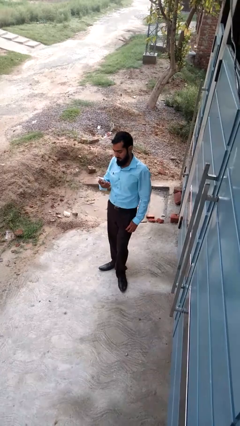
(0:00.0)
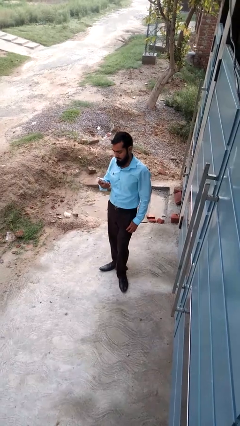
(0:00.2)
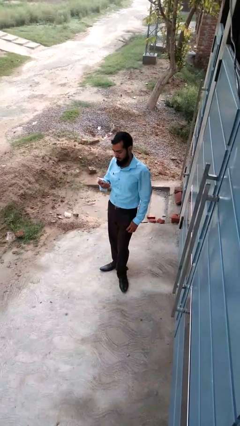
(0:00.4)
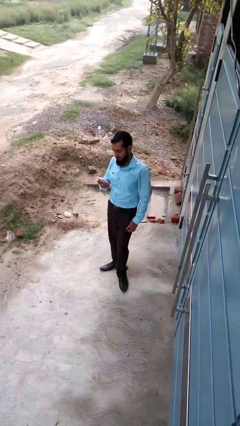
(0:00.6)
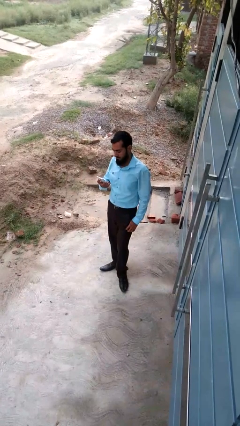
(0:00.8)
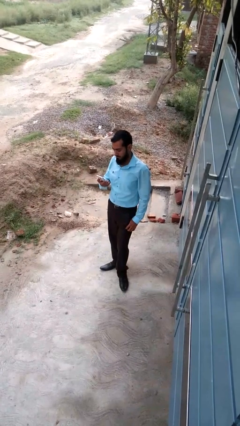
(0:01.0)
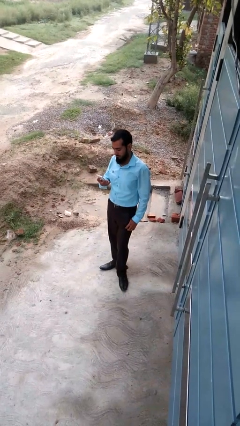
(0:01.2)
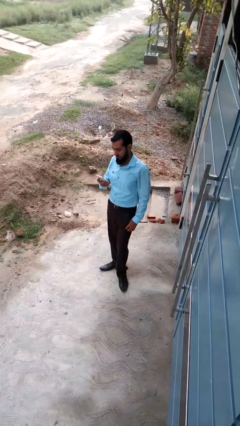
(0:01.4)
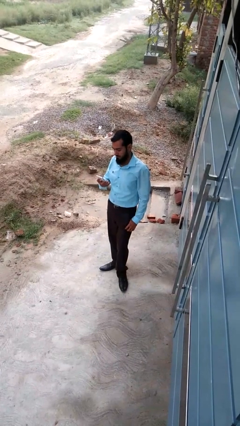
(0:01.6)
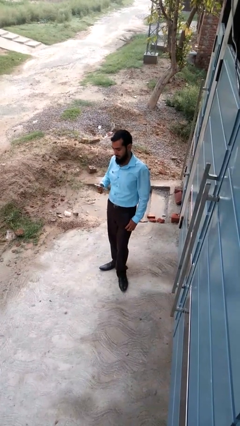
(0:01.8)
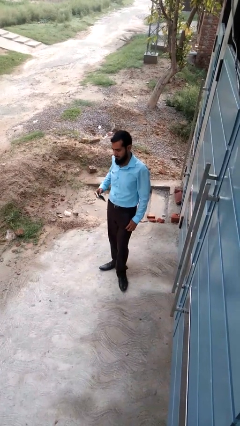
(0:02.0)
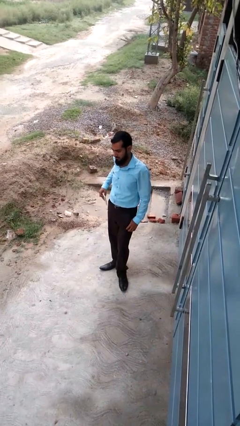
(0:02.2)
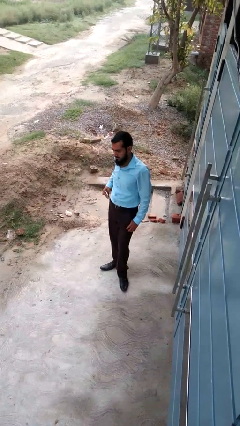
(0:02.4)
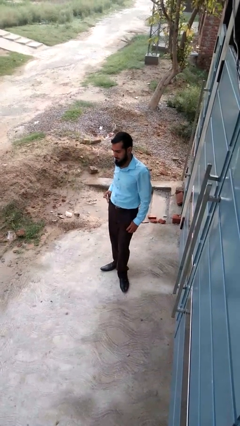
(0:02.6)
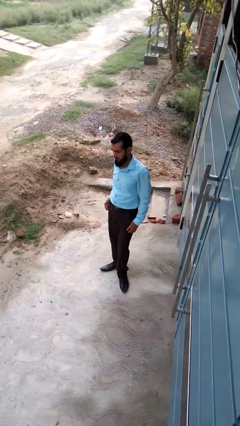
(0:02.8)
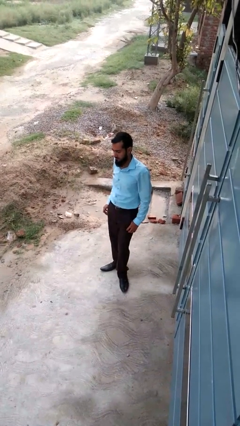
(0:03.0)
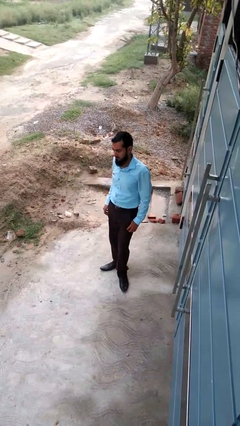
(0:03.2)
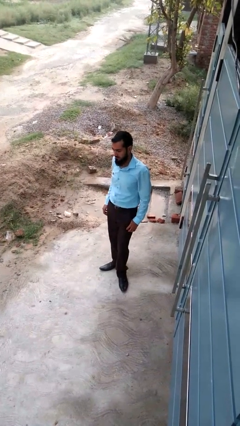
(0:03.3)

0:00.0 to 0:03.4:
person puts phone into pocket

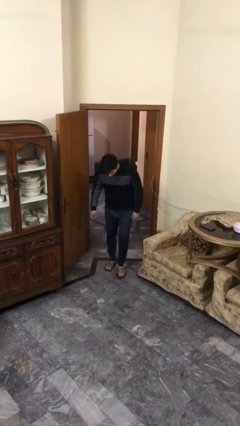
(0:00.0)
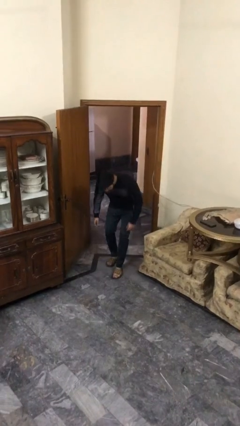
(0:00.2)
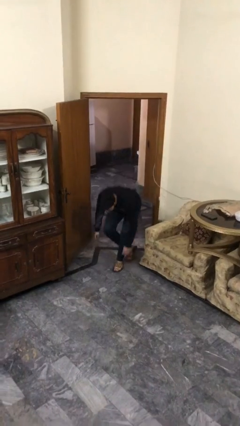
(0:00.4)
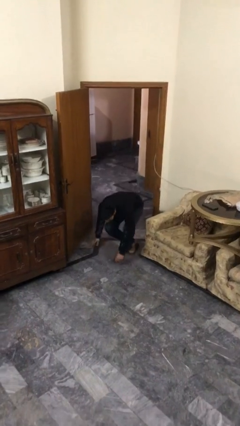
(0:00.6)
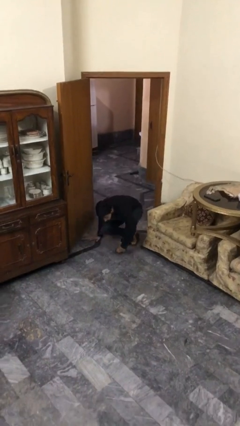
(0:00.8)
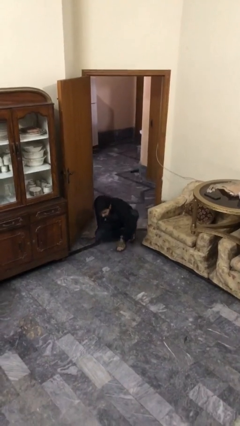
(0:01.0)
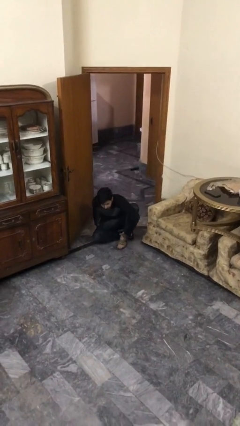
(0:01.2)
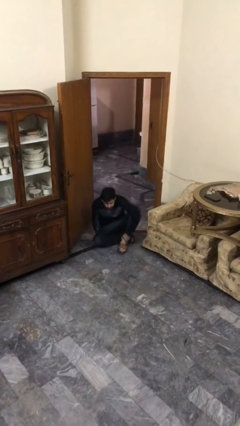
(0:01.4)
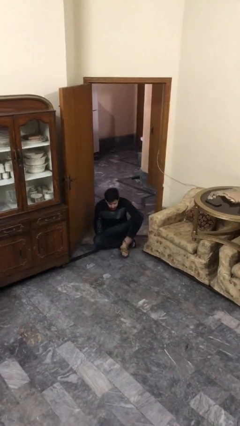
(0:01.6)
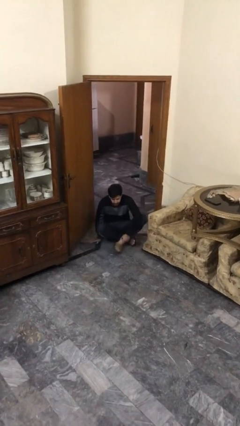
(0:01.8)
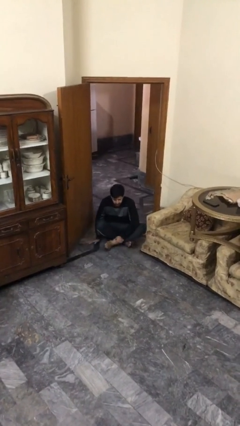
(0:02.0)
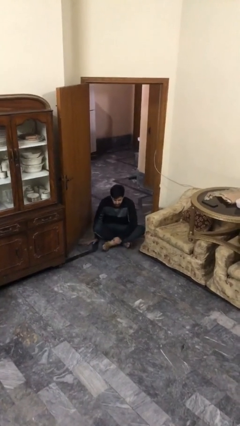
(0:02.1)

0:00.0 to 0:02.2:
person sits down

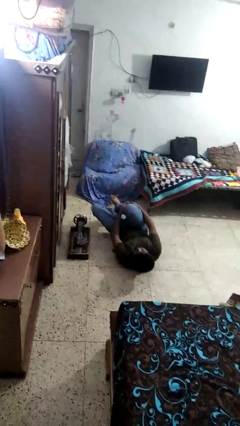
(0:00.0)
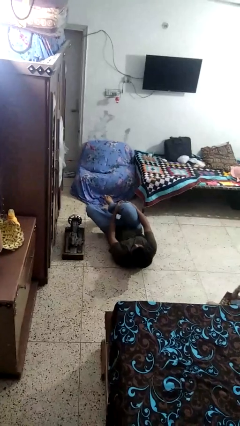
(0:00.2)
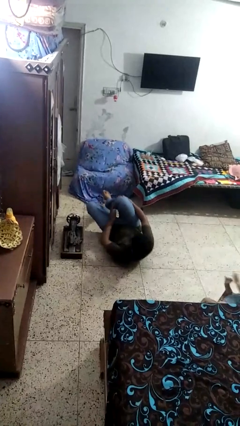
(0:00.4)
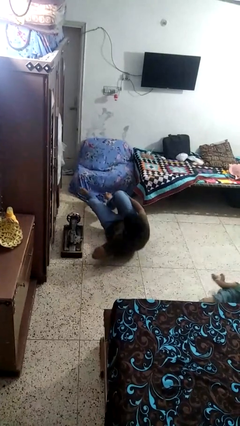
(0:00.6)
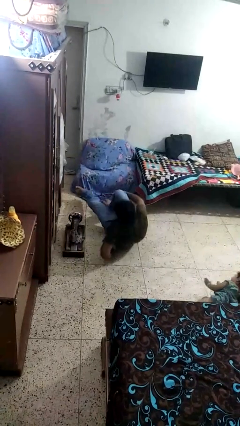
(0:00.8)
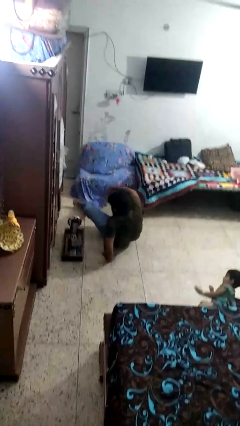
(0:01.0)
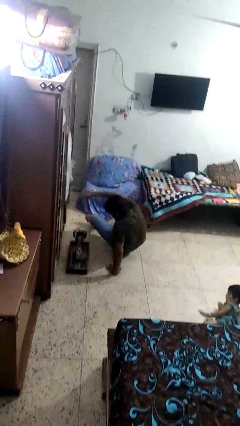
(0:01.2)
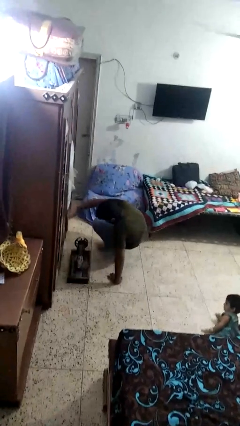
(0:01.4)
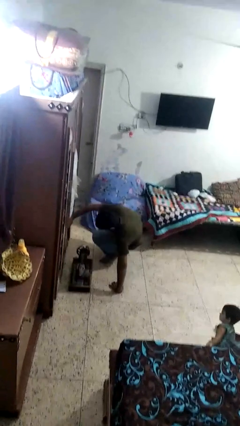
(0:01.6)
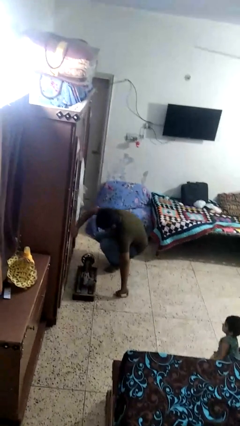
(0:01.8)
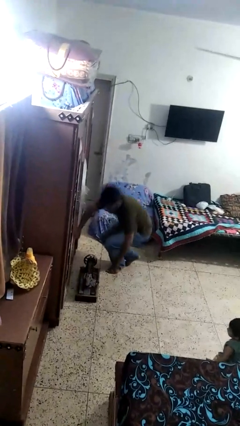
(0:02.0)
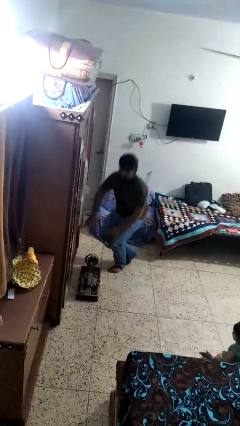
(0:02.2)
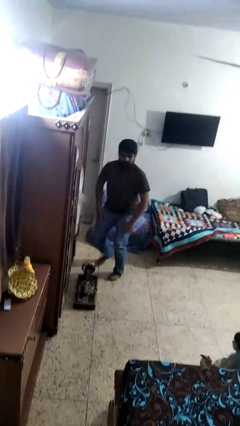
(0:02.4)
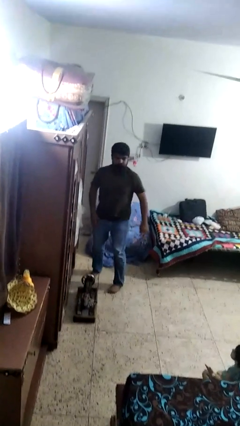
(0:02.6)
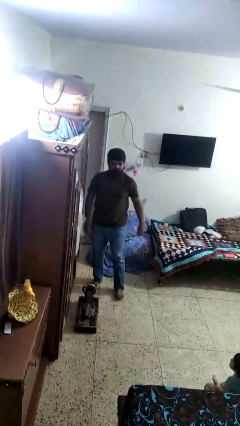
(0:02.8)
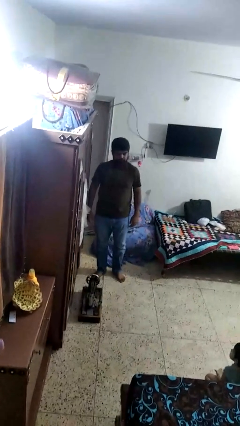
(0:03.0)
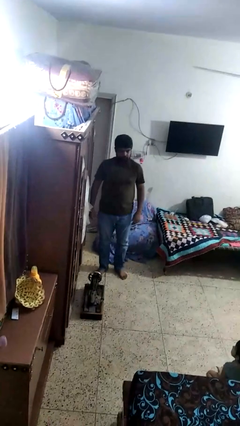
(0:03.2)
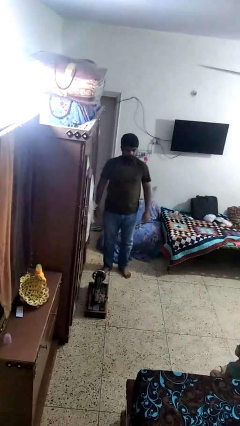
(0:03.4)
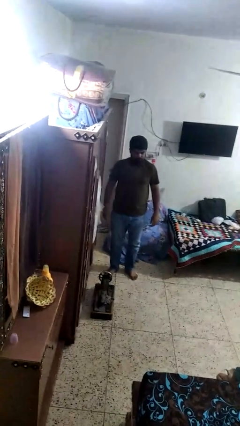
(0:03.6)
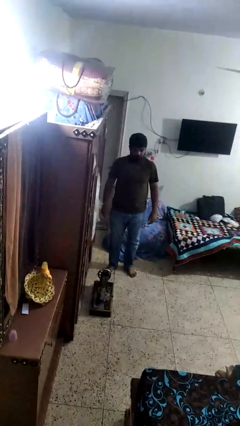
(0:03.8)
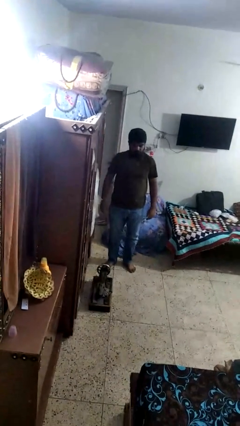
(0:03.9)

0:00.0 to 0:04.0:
person stands up from floor

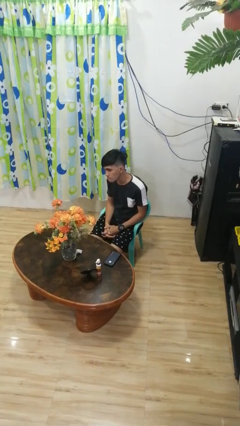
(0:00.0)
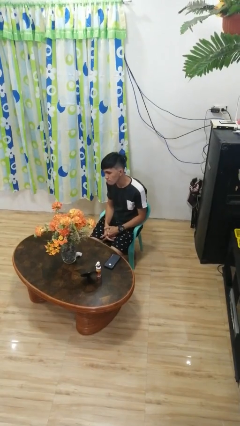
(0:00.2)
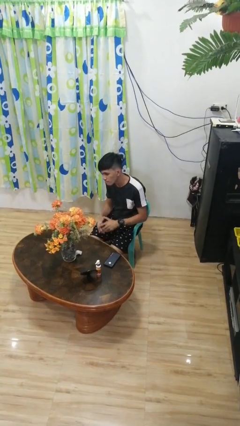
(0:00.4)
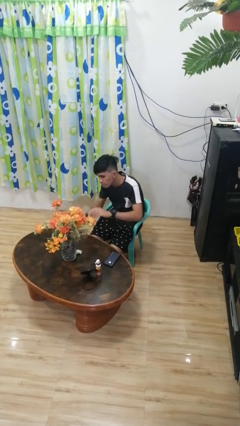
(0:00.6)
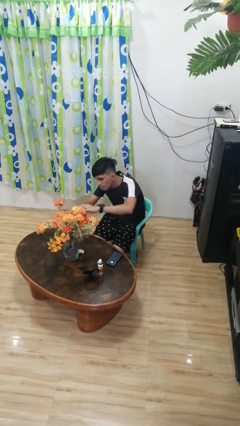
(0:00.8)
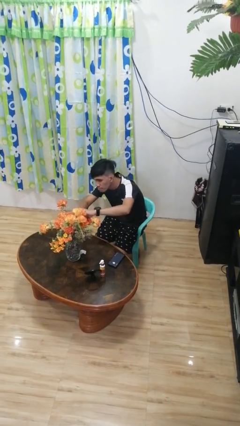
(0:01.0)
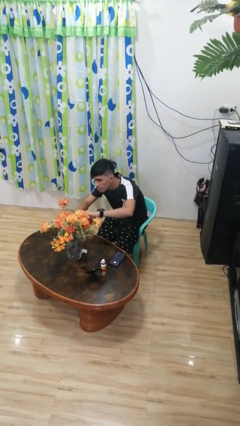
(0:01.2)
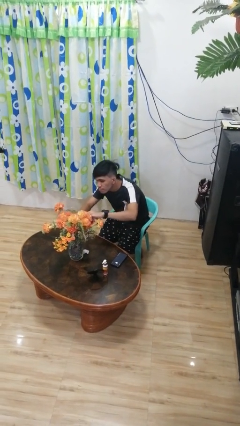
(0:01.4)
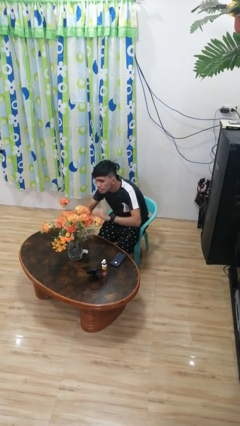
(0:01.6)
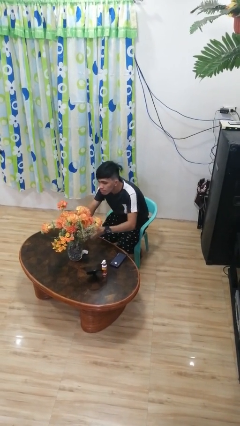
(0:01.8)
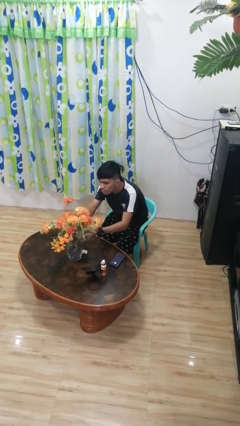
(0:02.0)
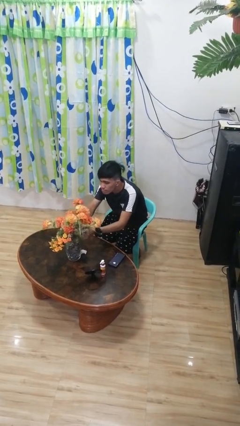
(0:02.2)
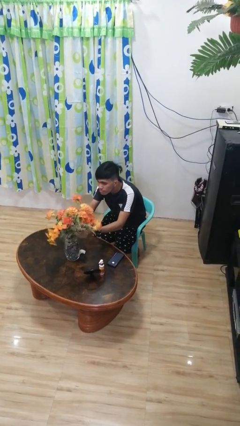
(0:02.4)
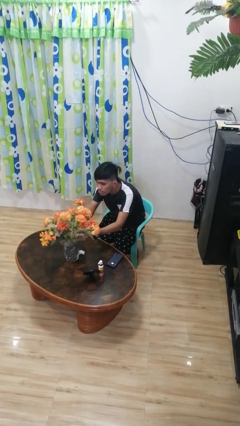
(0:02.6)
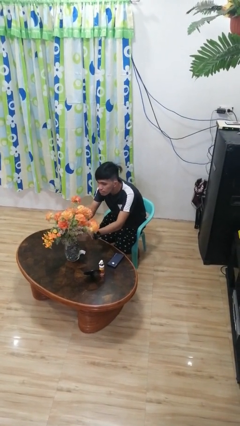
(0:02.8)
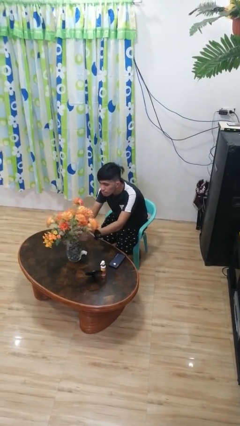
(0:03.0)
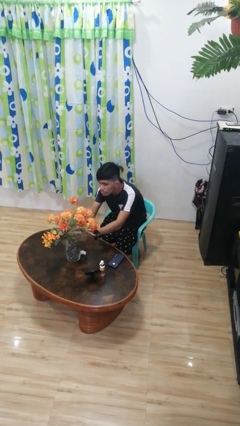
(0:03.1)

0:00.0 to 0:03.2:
person arranges flowers in vase

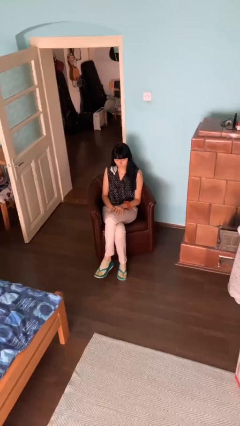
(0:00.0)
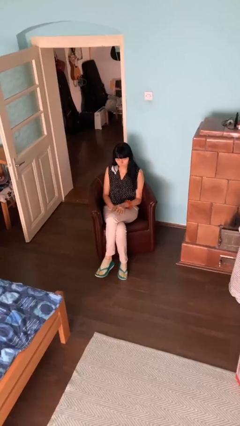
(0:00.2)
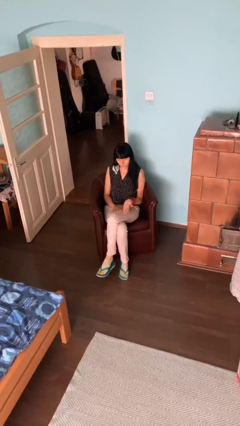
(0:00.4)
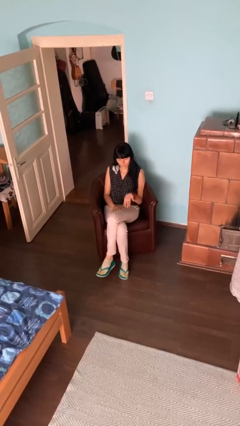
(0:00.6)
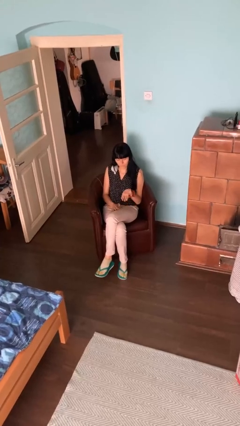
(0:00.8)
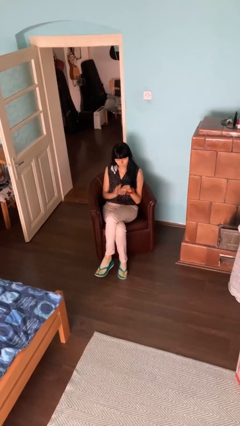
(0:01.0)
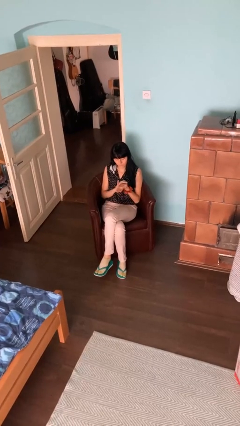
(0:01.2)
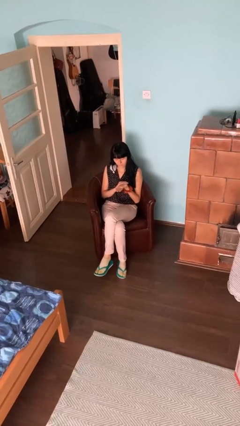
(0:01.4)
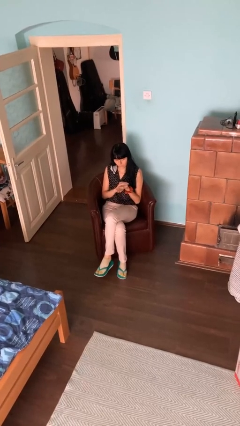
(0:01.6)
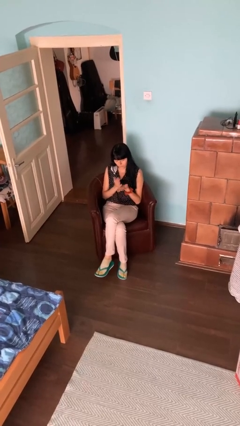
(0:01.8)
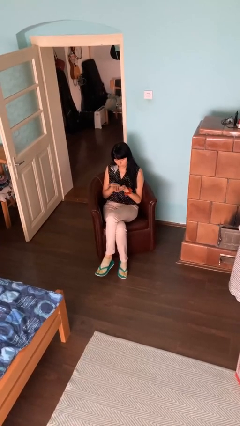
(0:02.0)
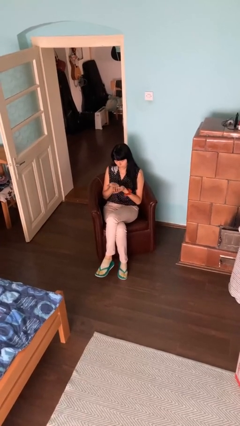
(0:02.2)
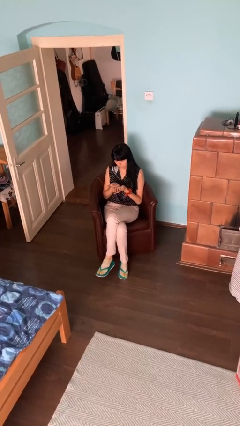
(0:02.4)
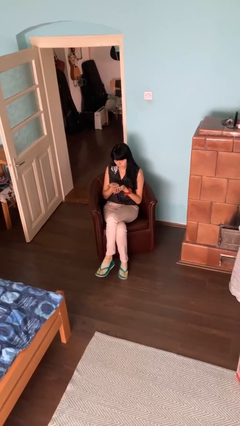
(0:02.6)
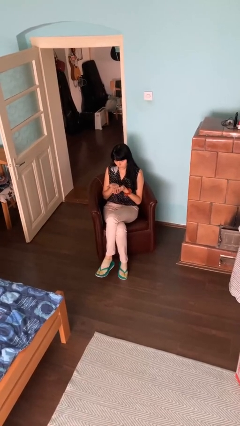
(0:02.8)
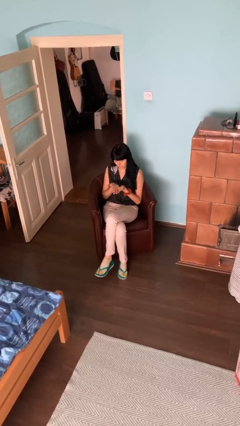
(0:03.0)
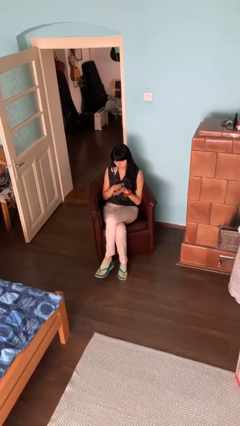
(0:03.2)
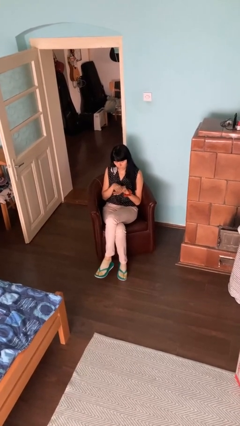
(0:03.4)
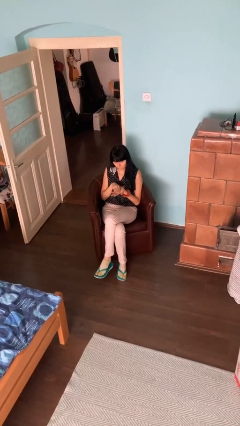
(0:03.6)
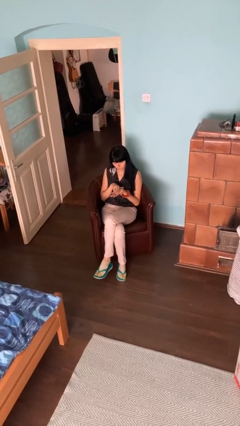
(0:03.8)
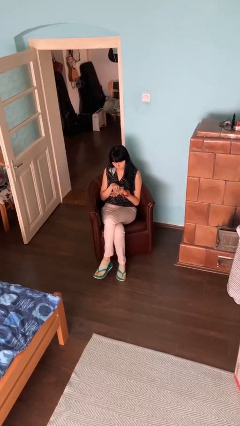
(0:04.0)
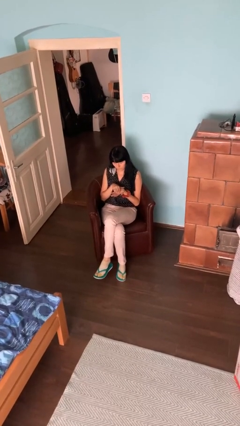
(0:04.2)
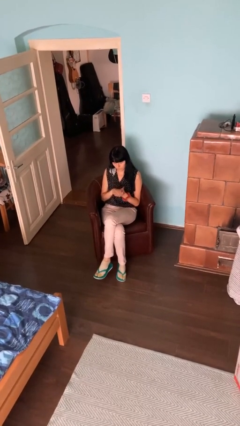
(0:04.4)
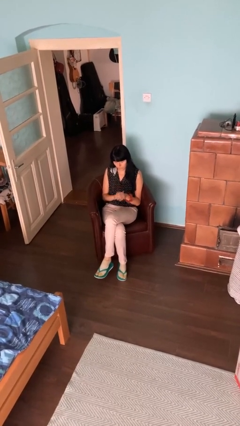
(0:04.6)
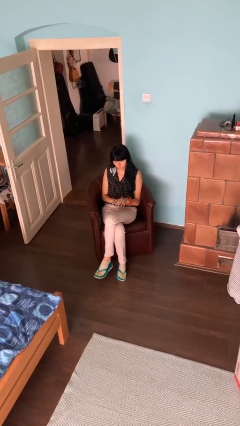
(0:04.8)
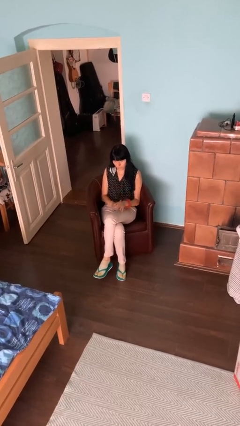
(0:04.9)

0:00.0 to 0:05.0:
person looks at hands in lap
